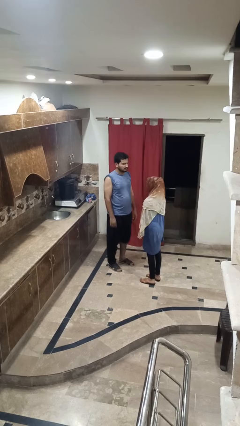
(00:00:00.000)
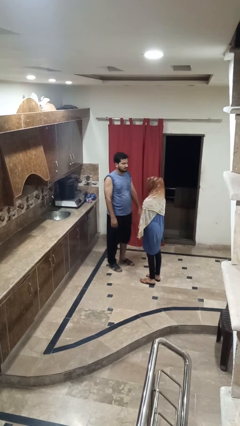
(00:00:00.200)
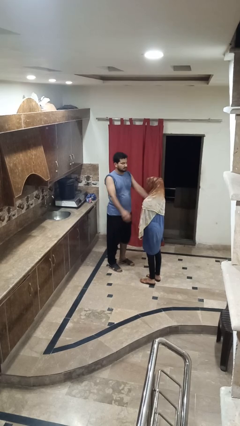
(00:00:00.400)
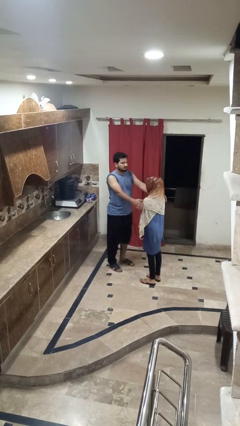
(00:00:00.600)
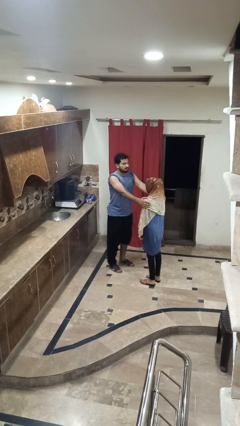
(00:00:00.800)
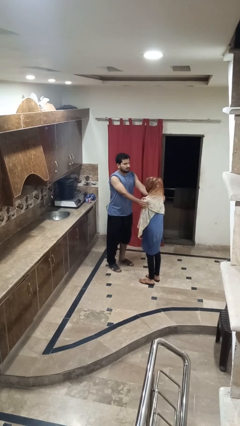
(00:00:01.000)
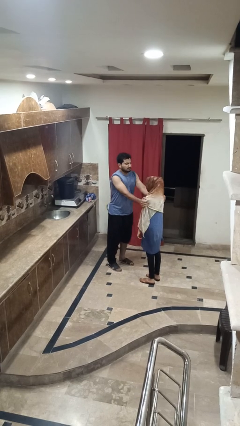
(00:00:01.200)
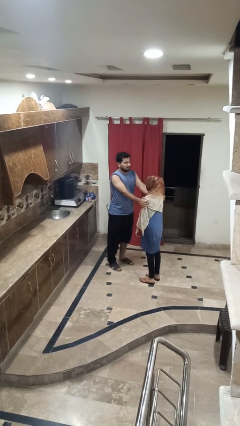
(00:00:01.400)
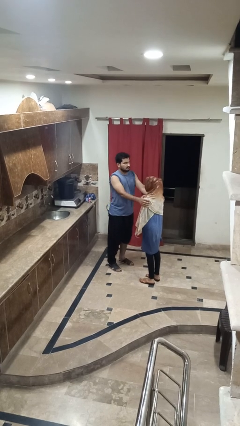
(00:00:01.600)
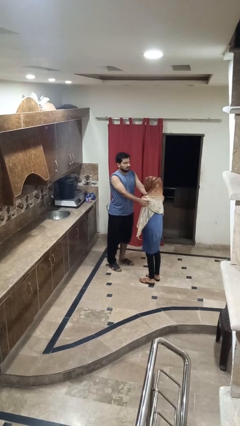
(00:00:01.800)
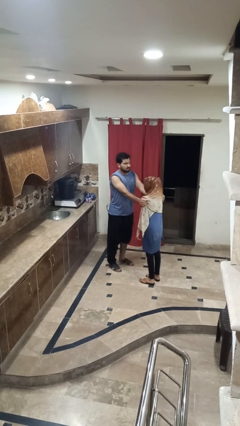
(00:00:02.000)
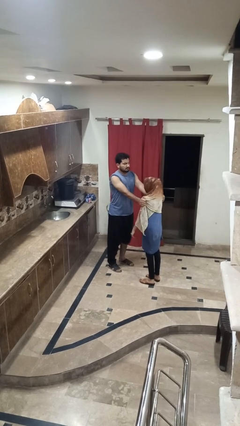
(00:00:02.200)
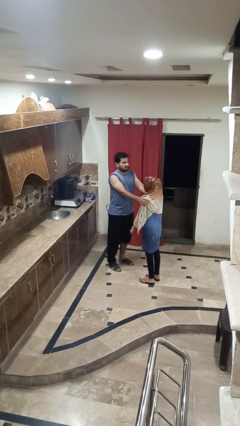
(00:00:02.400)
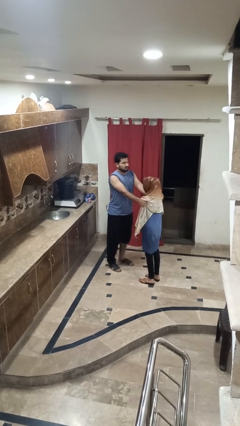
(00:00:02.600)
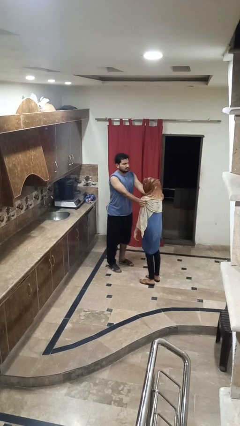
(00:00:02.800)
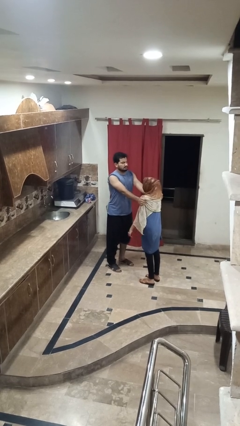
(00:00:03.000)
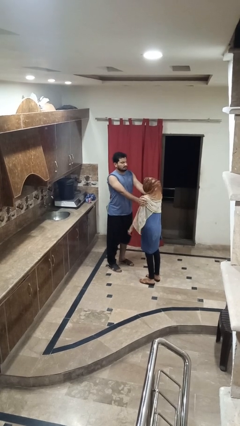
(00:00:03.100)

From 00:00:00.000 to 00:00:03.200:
person pounds shoulders of person

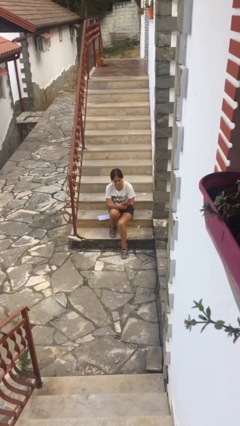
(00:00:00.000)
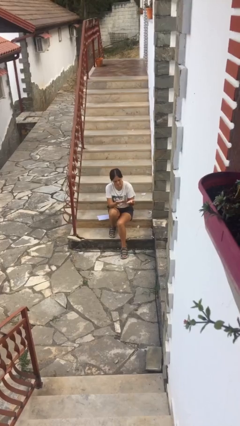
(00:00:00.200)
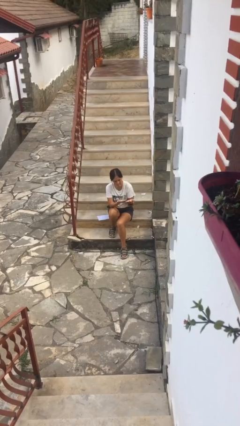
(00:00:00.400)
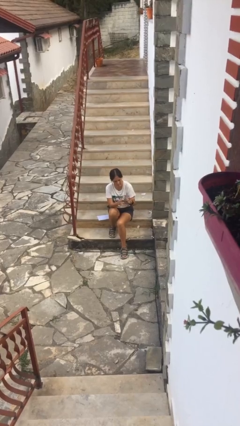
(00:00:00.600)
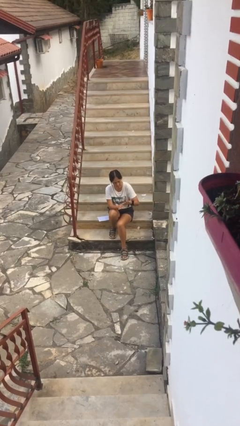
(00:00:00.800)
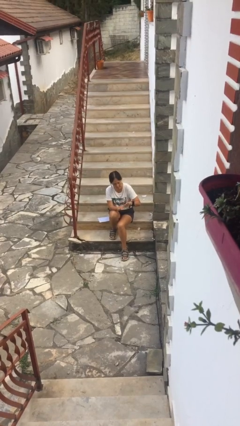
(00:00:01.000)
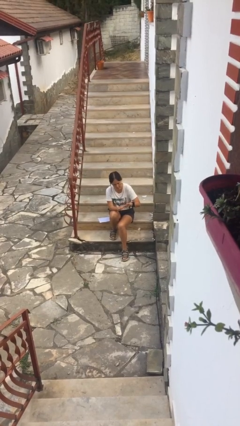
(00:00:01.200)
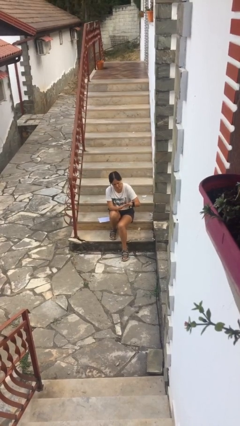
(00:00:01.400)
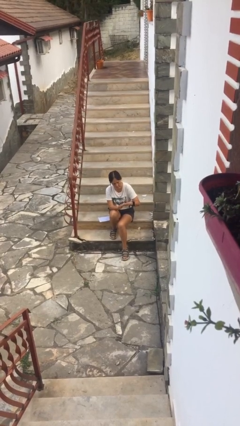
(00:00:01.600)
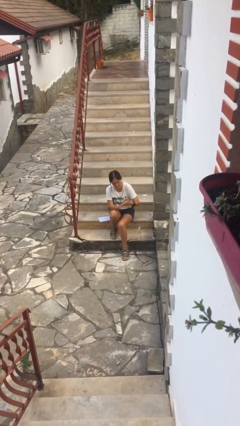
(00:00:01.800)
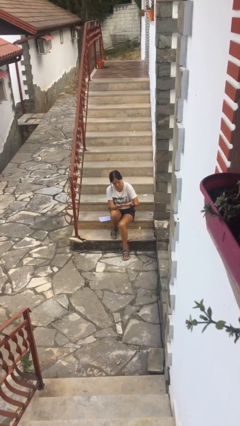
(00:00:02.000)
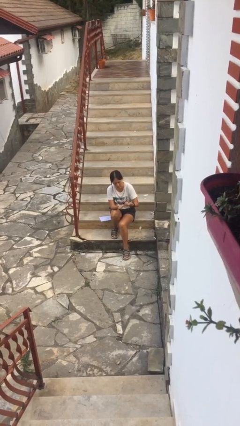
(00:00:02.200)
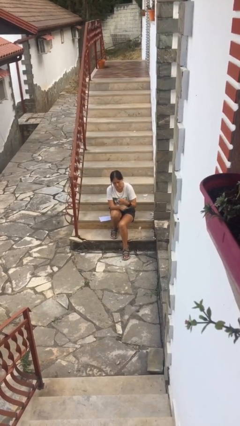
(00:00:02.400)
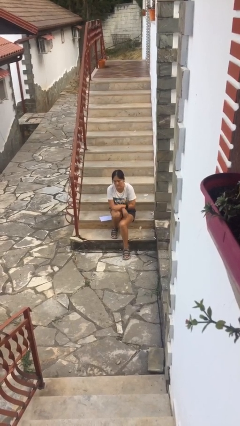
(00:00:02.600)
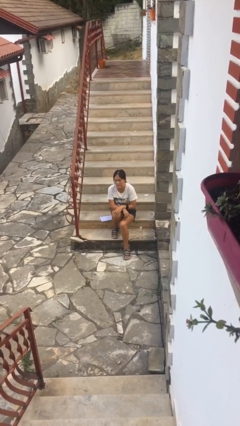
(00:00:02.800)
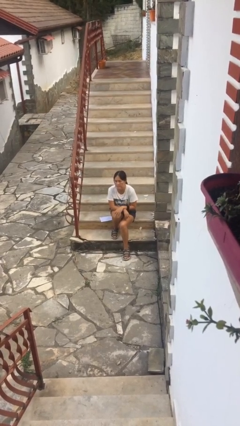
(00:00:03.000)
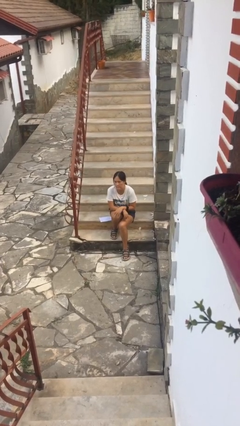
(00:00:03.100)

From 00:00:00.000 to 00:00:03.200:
person looks at hands in lap

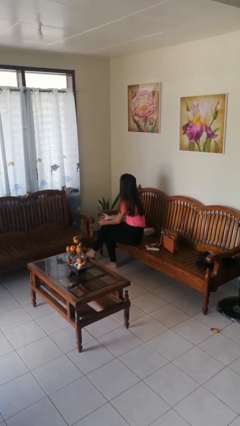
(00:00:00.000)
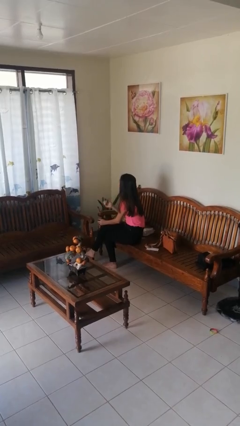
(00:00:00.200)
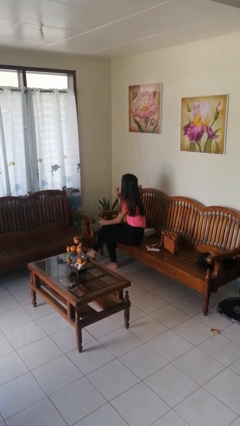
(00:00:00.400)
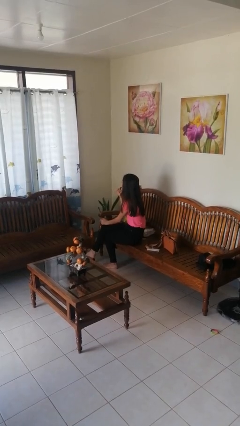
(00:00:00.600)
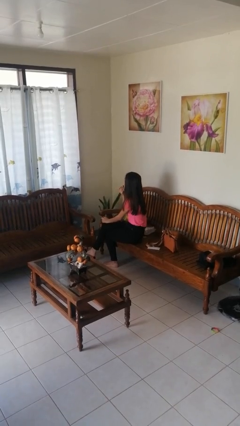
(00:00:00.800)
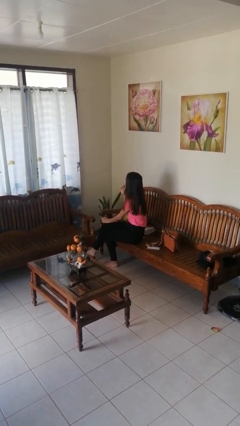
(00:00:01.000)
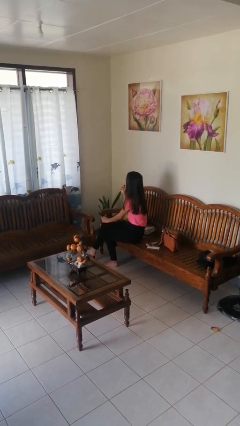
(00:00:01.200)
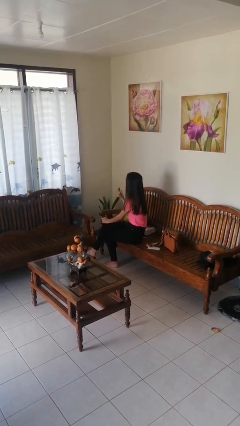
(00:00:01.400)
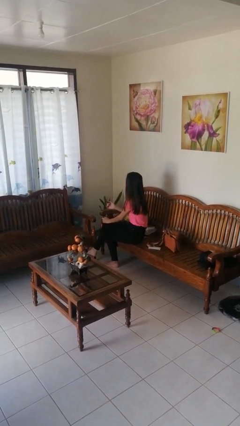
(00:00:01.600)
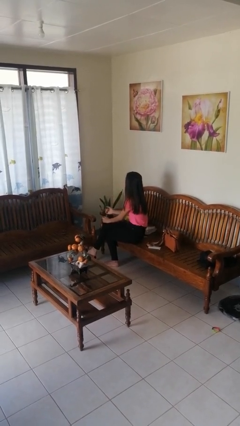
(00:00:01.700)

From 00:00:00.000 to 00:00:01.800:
person applies lip makeup

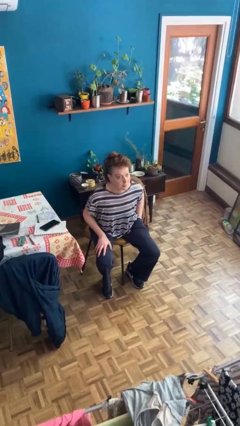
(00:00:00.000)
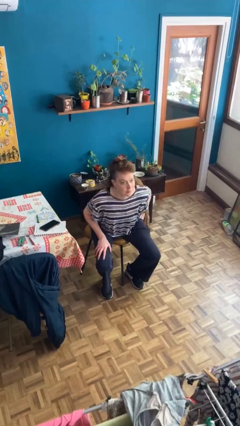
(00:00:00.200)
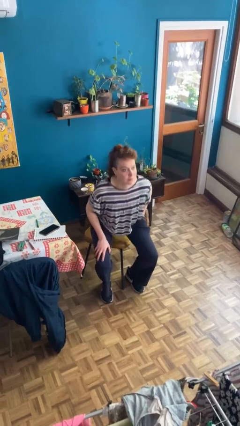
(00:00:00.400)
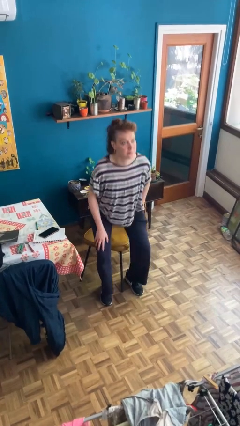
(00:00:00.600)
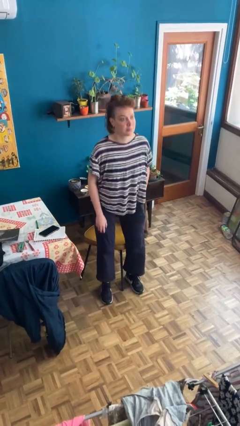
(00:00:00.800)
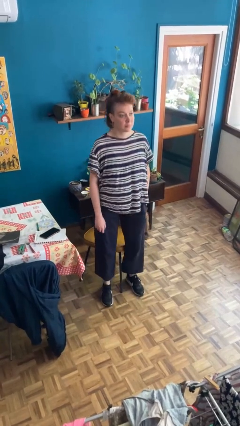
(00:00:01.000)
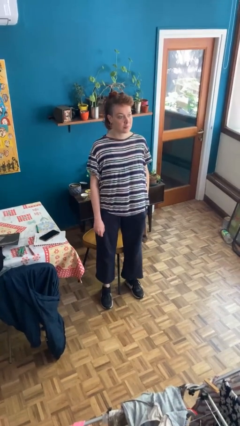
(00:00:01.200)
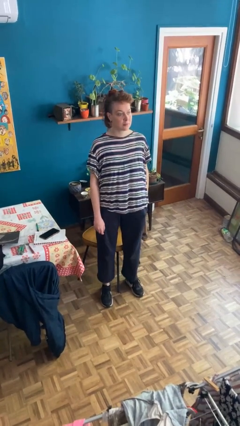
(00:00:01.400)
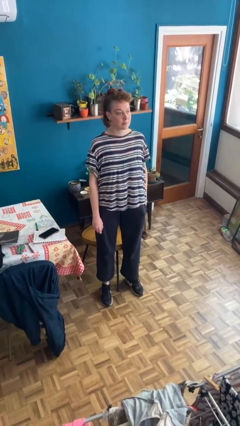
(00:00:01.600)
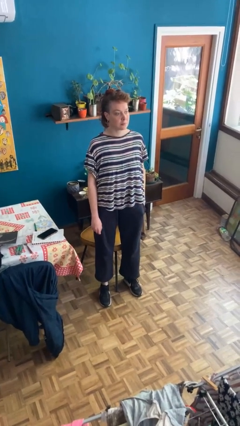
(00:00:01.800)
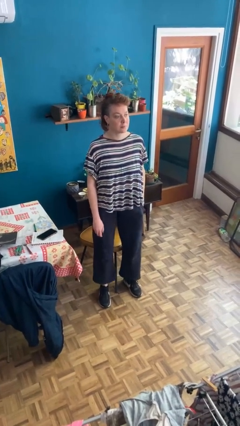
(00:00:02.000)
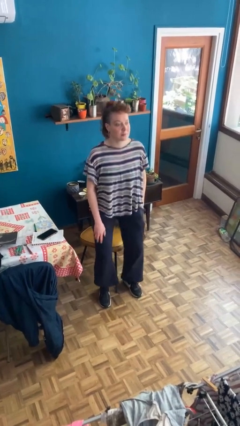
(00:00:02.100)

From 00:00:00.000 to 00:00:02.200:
person stands up

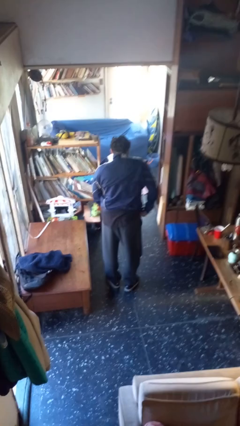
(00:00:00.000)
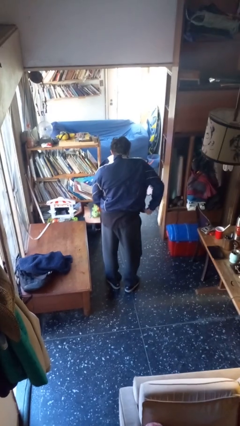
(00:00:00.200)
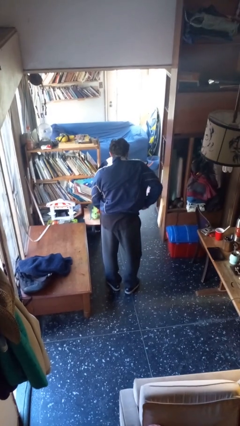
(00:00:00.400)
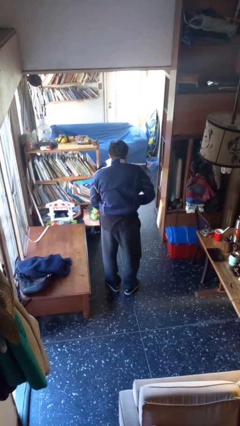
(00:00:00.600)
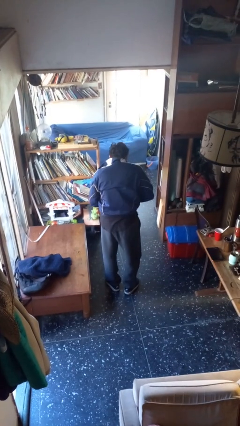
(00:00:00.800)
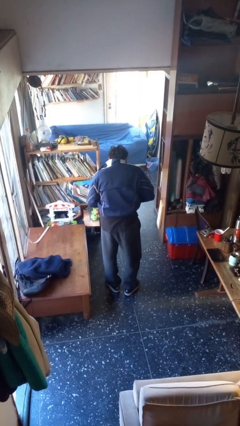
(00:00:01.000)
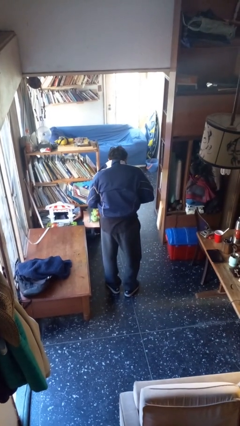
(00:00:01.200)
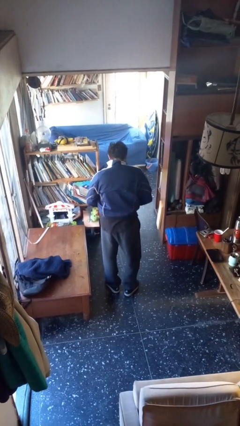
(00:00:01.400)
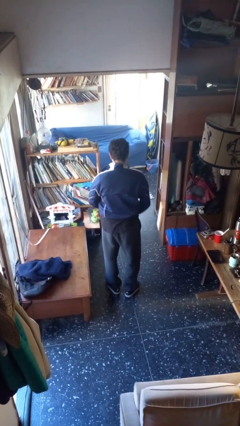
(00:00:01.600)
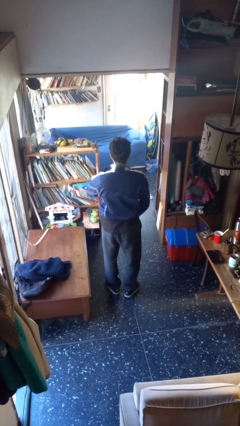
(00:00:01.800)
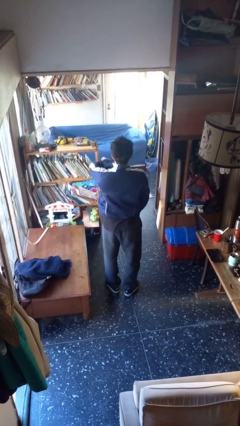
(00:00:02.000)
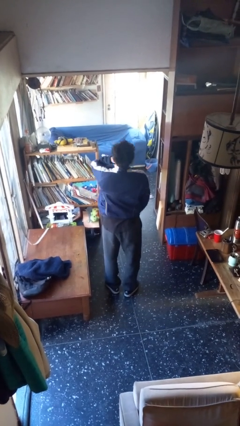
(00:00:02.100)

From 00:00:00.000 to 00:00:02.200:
person zips up jacket

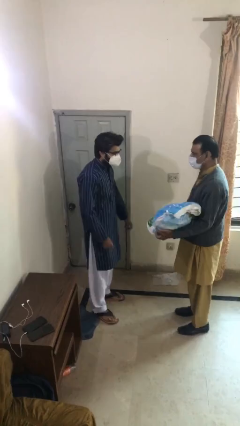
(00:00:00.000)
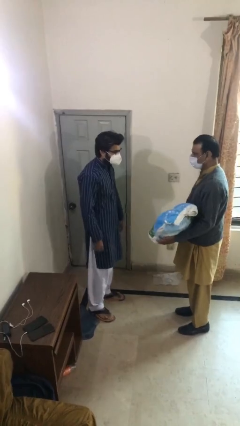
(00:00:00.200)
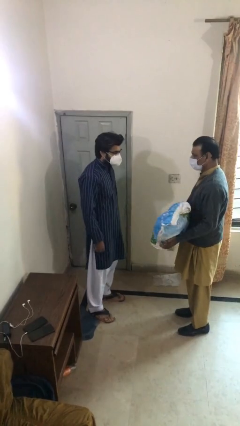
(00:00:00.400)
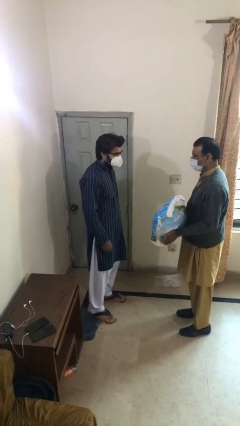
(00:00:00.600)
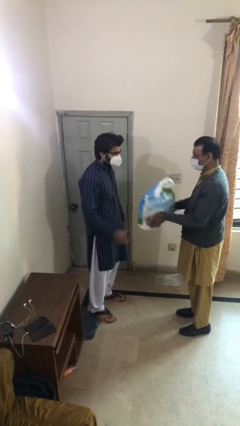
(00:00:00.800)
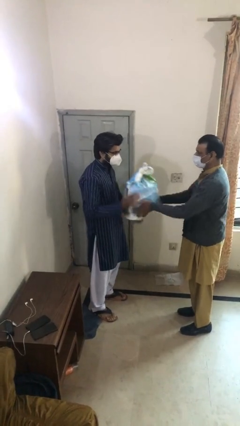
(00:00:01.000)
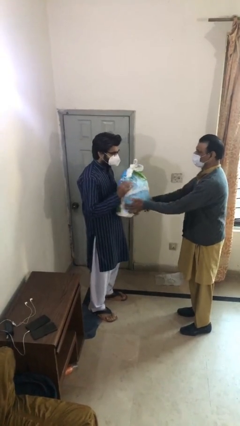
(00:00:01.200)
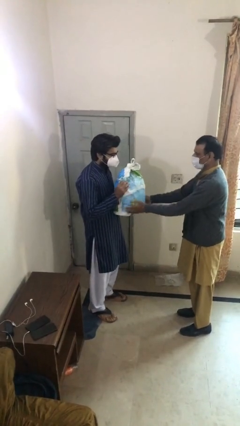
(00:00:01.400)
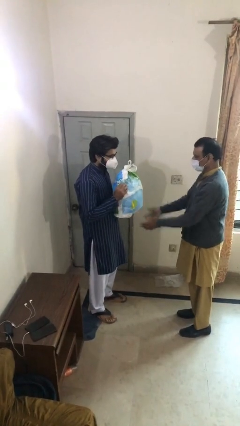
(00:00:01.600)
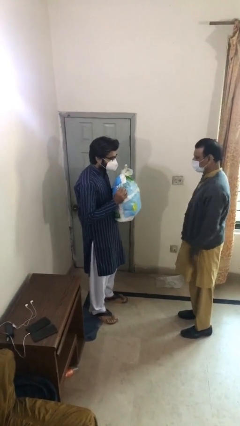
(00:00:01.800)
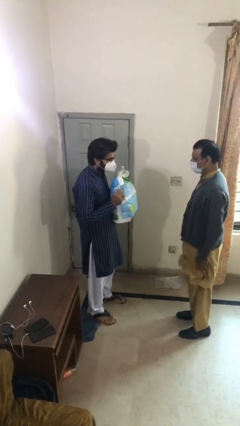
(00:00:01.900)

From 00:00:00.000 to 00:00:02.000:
person transfers object to person

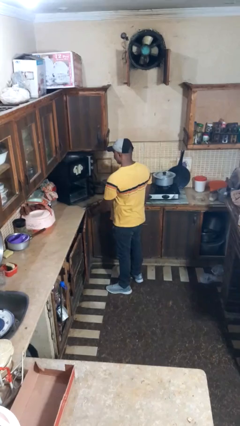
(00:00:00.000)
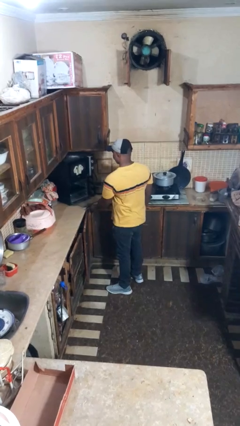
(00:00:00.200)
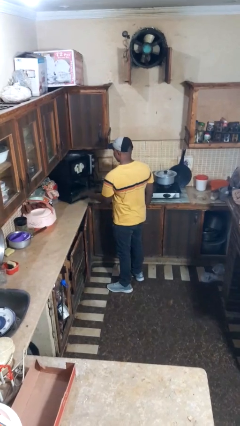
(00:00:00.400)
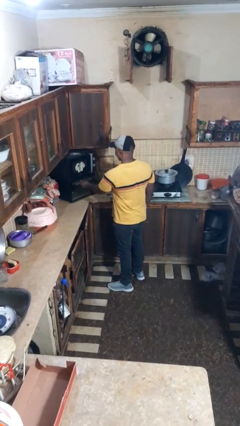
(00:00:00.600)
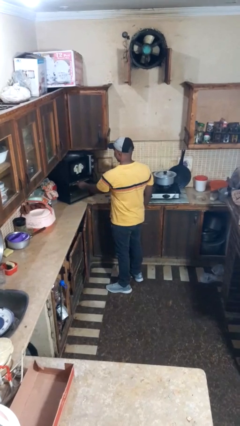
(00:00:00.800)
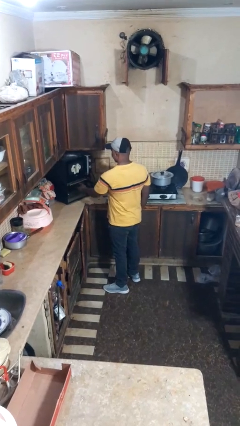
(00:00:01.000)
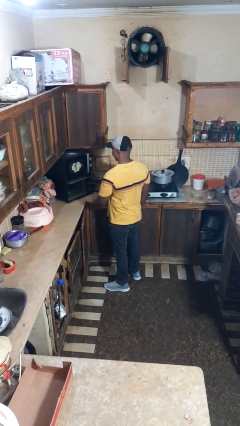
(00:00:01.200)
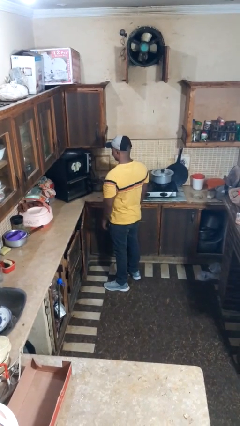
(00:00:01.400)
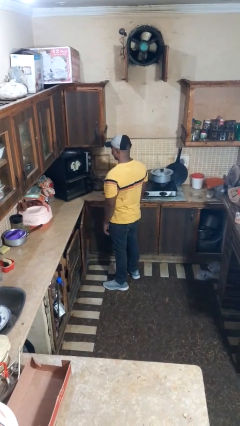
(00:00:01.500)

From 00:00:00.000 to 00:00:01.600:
person closes oven door

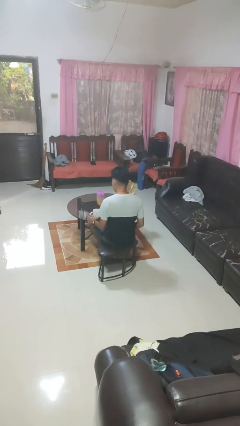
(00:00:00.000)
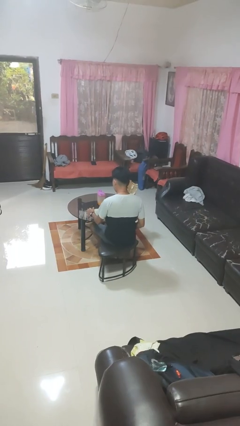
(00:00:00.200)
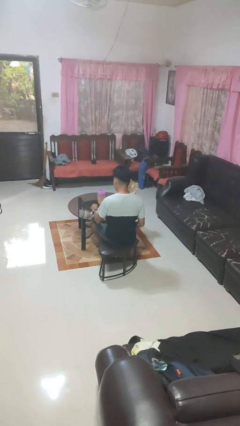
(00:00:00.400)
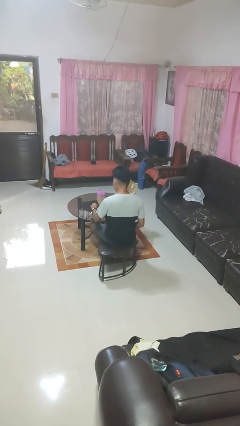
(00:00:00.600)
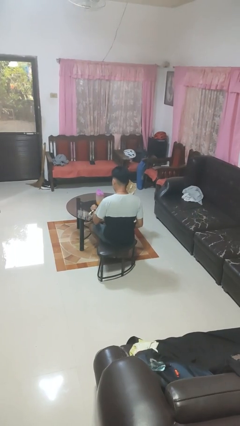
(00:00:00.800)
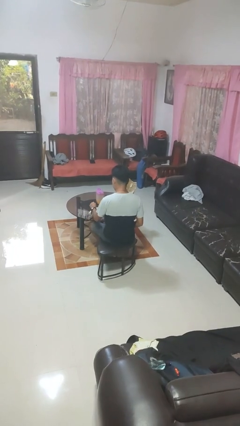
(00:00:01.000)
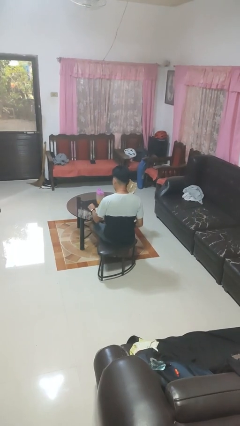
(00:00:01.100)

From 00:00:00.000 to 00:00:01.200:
person stirs mug
